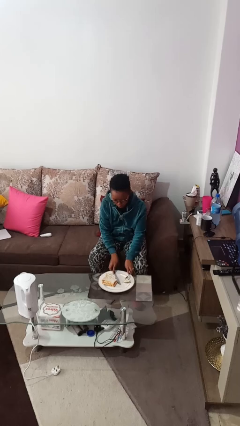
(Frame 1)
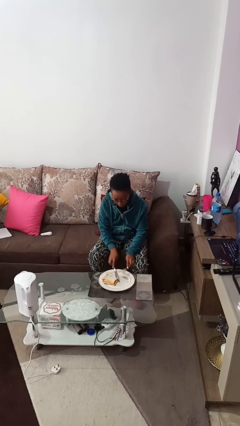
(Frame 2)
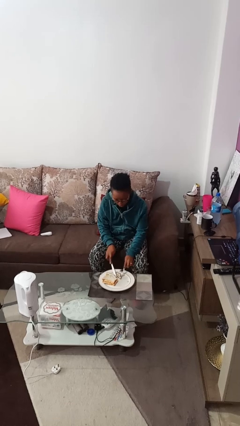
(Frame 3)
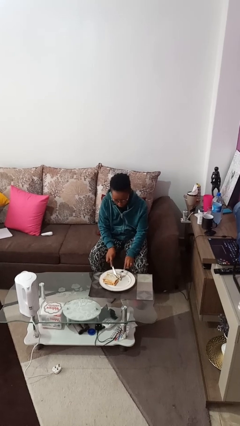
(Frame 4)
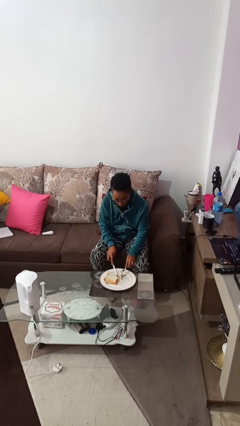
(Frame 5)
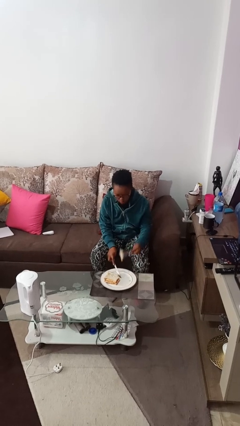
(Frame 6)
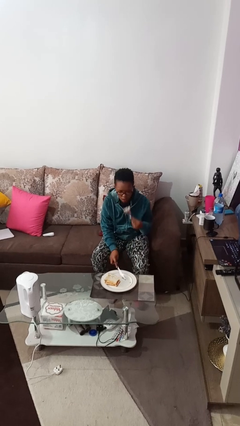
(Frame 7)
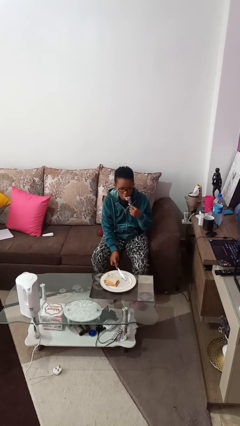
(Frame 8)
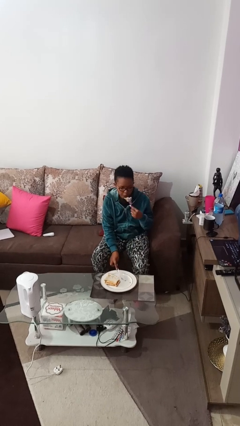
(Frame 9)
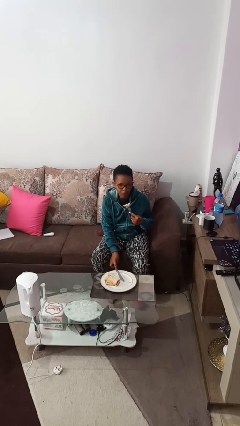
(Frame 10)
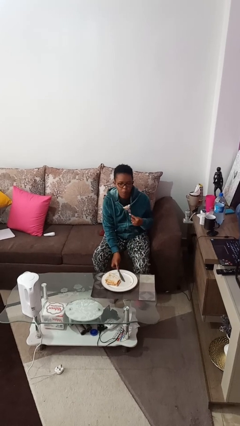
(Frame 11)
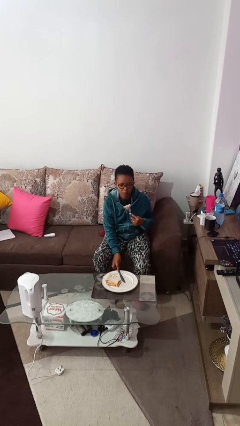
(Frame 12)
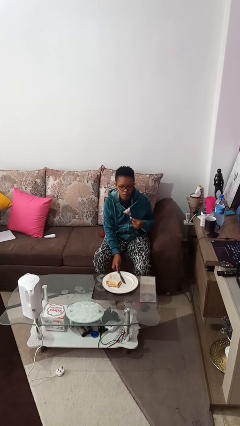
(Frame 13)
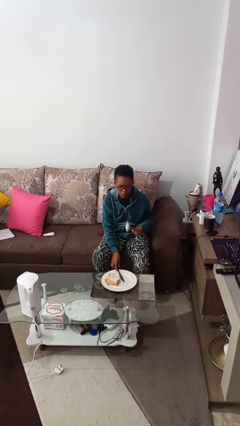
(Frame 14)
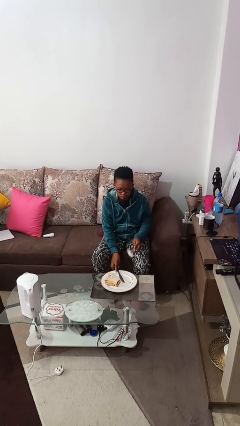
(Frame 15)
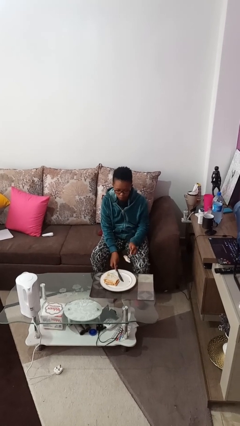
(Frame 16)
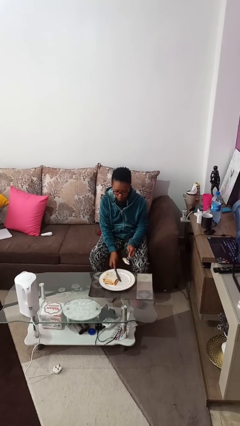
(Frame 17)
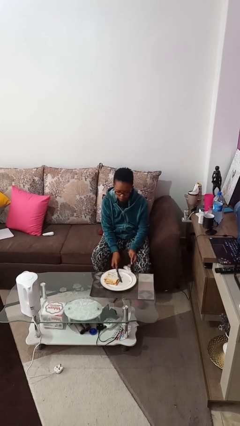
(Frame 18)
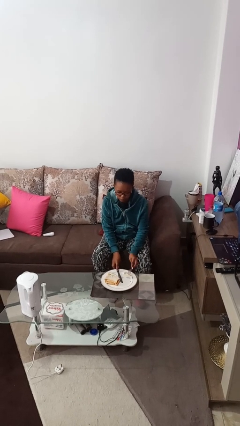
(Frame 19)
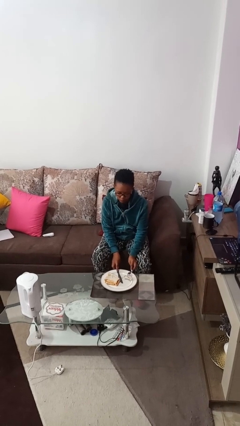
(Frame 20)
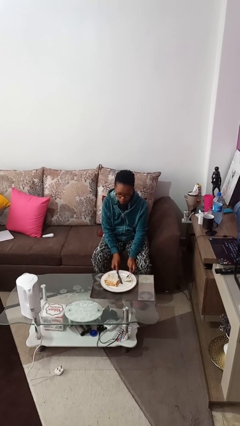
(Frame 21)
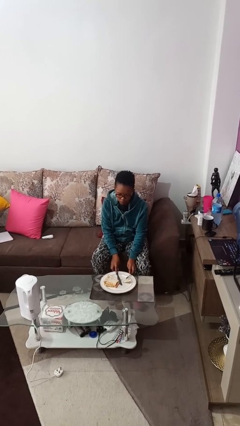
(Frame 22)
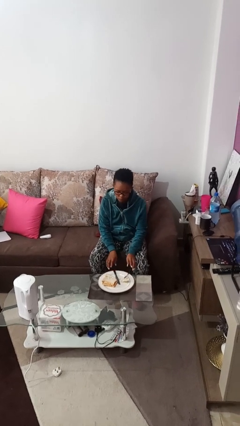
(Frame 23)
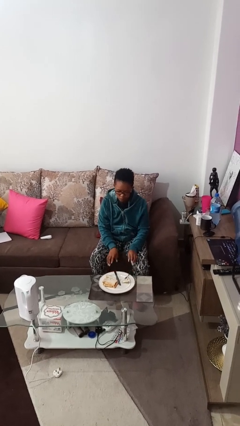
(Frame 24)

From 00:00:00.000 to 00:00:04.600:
person eats with utensil

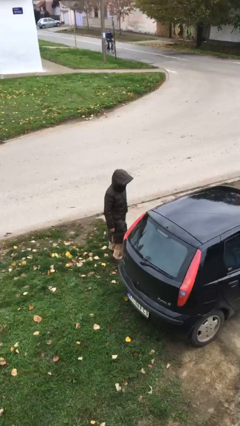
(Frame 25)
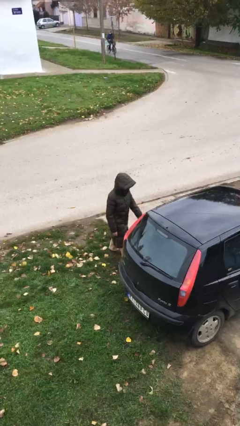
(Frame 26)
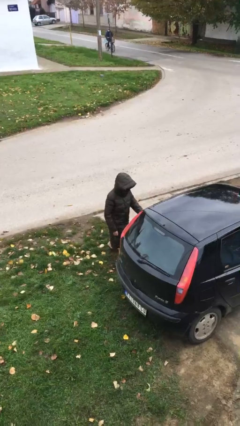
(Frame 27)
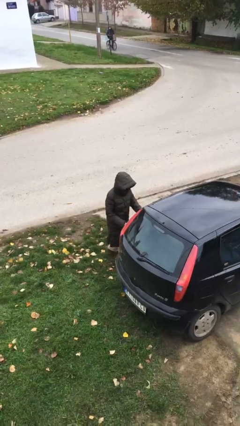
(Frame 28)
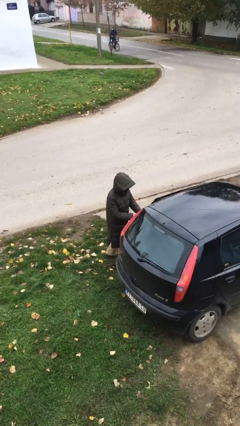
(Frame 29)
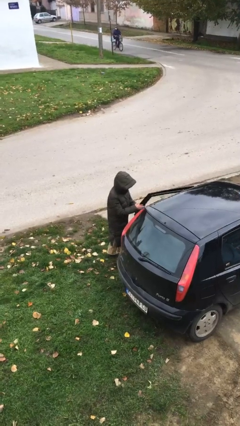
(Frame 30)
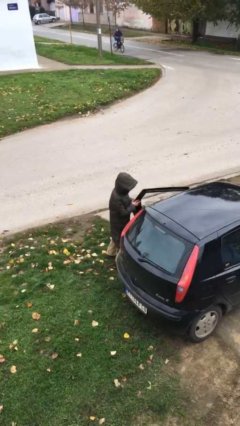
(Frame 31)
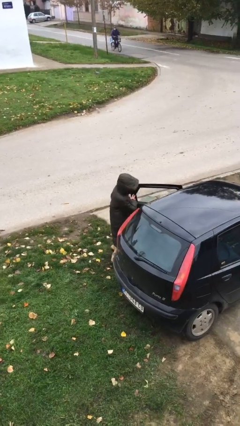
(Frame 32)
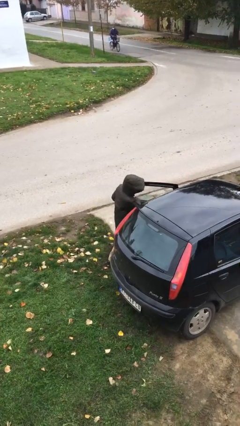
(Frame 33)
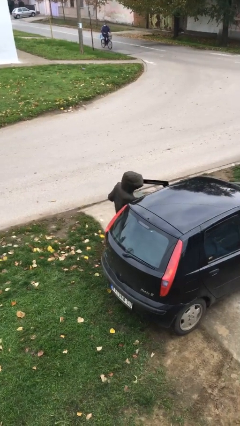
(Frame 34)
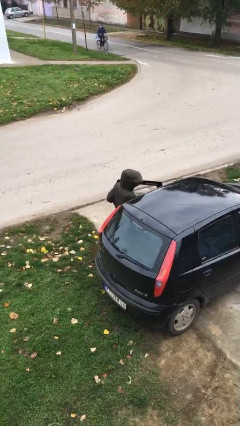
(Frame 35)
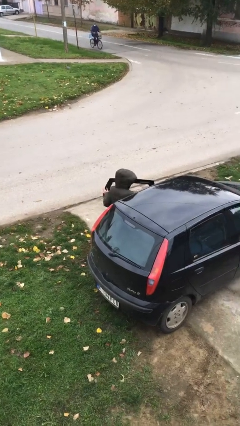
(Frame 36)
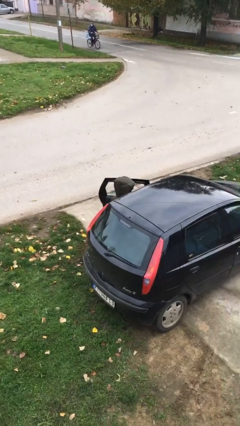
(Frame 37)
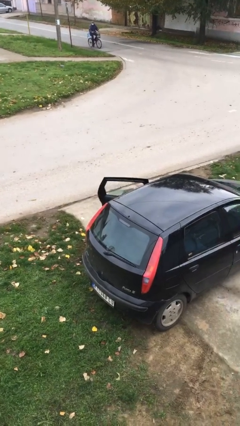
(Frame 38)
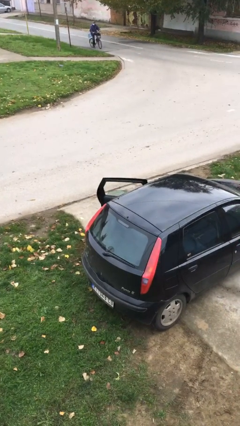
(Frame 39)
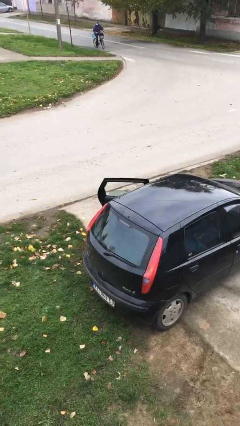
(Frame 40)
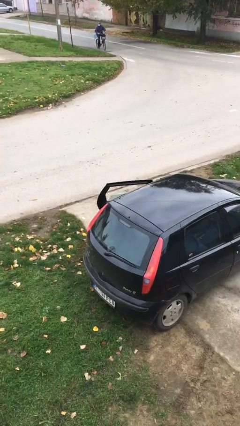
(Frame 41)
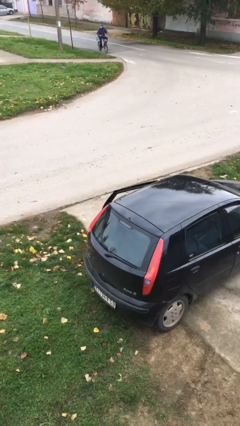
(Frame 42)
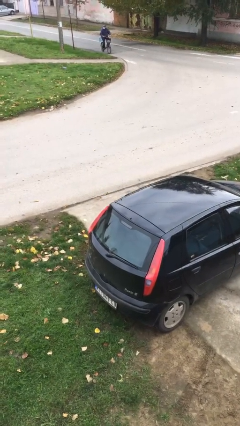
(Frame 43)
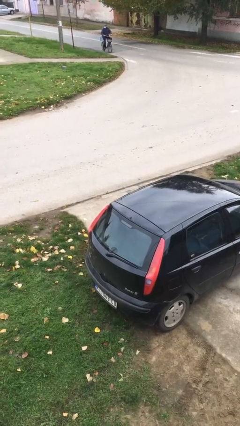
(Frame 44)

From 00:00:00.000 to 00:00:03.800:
person enters car

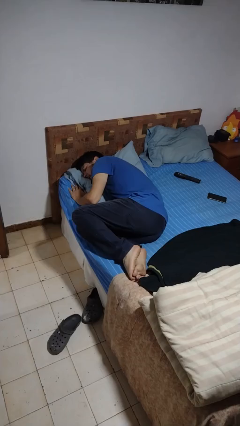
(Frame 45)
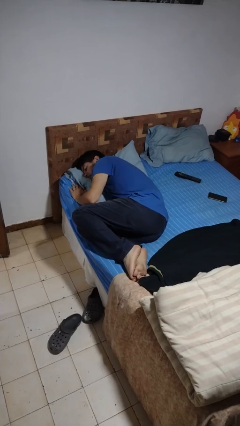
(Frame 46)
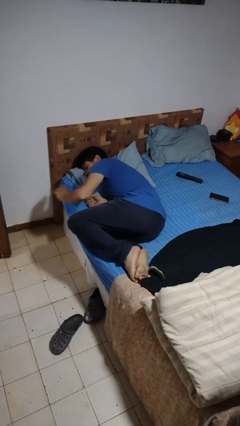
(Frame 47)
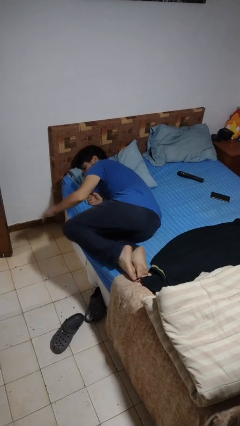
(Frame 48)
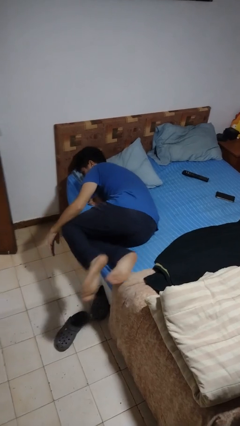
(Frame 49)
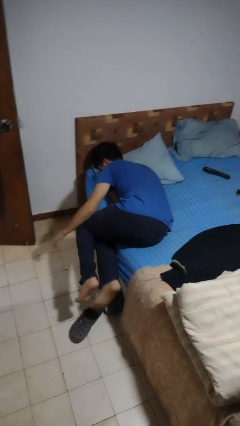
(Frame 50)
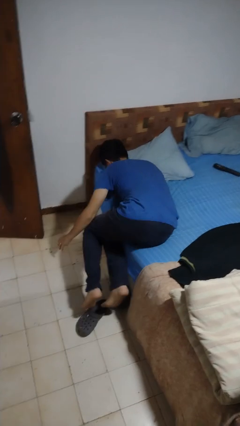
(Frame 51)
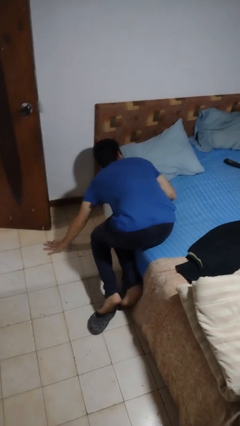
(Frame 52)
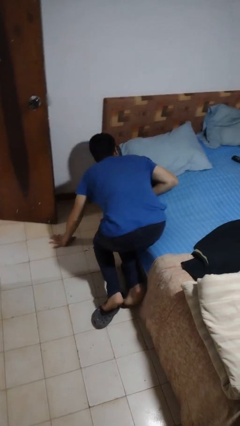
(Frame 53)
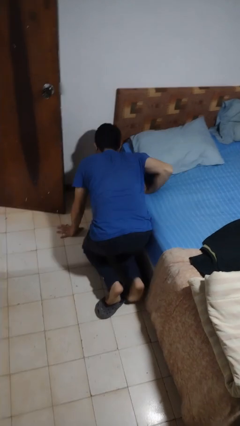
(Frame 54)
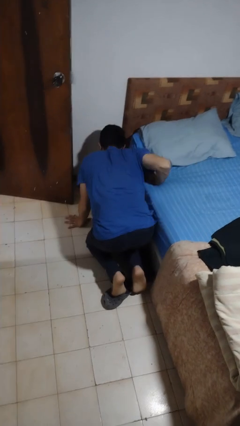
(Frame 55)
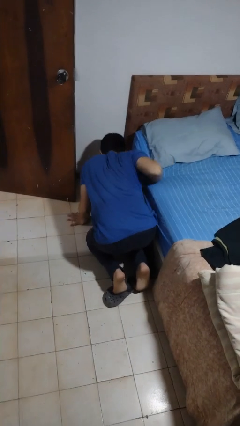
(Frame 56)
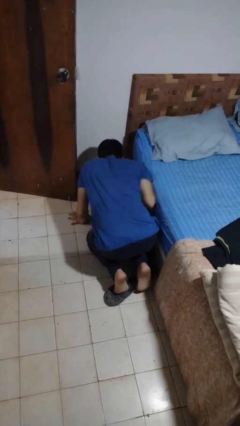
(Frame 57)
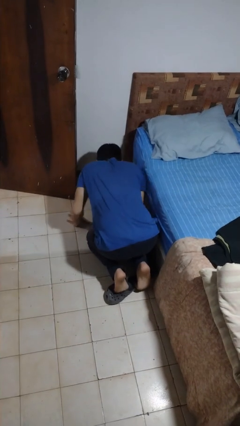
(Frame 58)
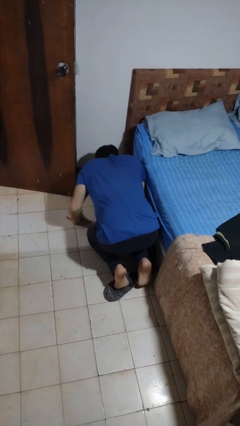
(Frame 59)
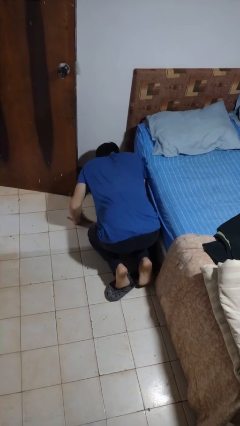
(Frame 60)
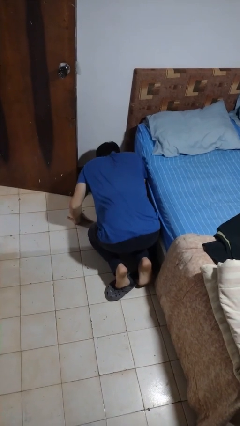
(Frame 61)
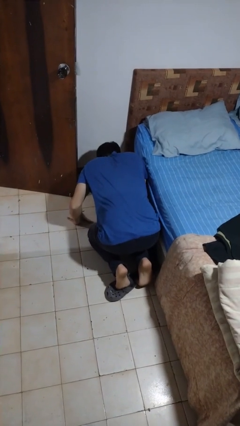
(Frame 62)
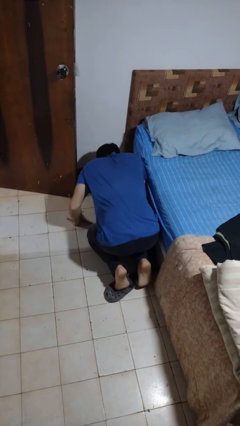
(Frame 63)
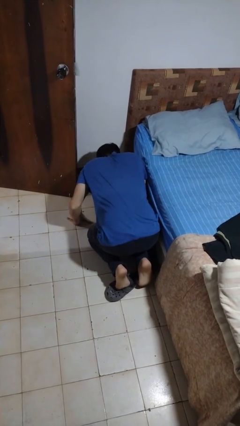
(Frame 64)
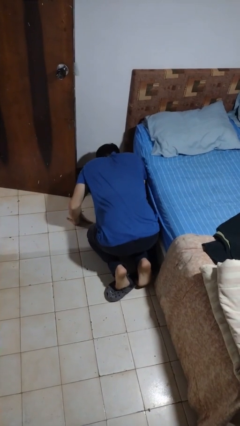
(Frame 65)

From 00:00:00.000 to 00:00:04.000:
person falls from bed

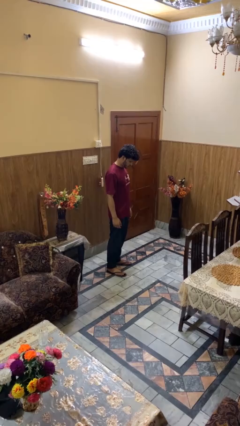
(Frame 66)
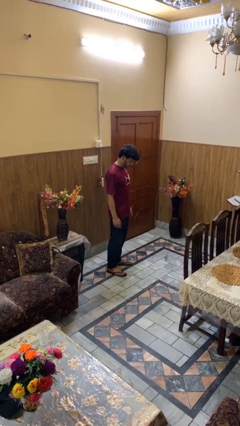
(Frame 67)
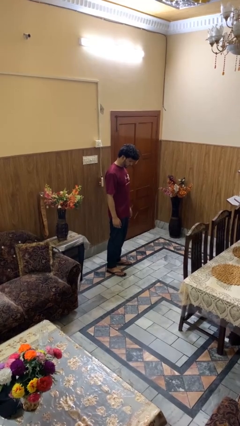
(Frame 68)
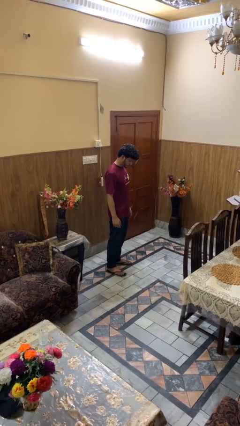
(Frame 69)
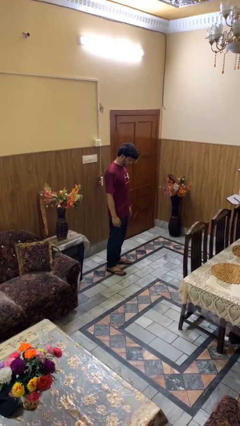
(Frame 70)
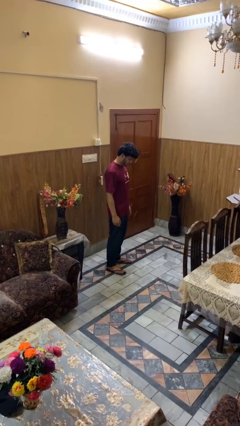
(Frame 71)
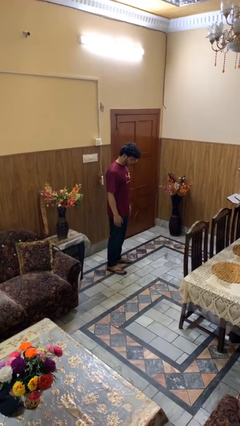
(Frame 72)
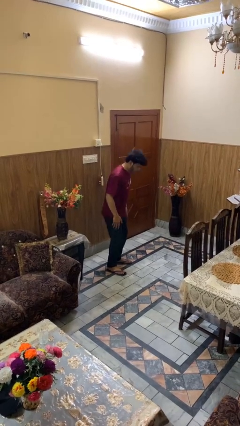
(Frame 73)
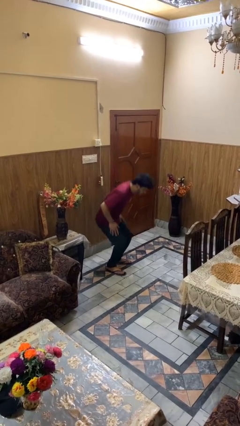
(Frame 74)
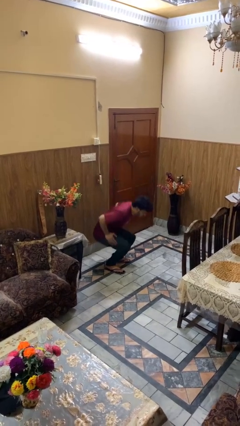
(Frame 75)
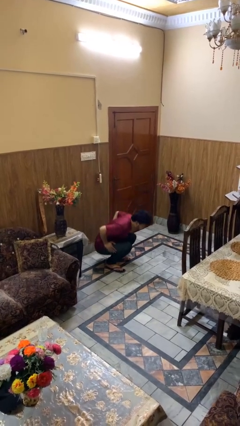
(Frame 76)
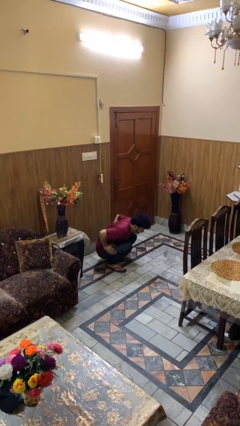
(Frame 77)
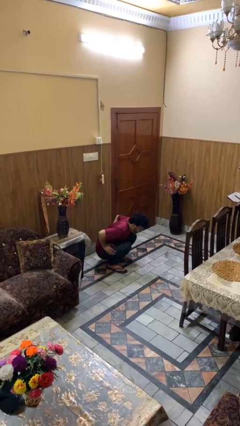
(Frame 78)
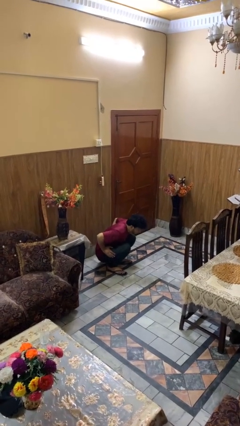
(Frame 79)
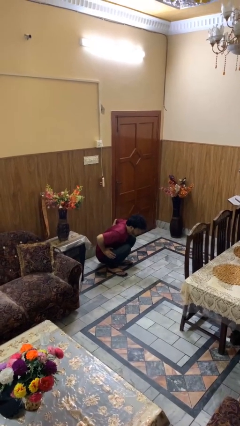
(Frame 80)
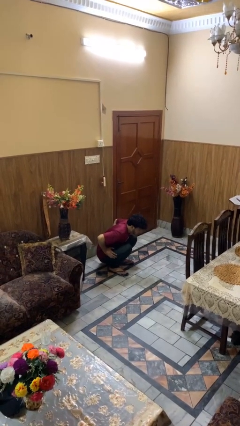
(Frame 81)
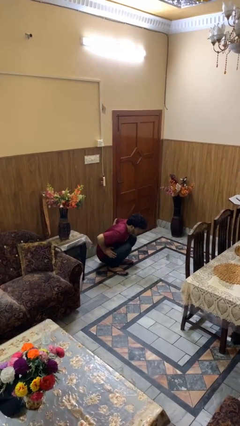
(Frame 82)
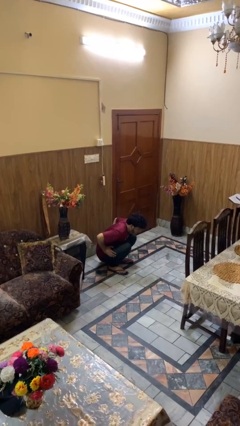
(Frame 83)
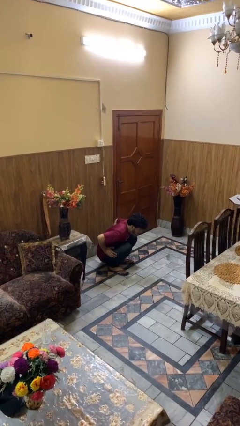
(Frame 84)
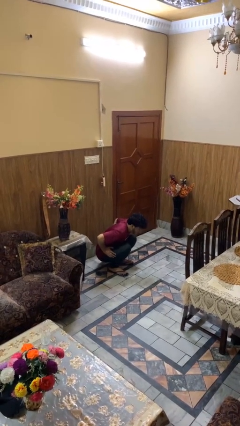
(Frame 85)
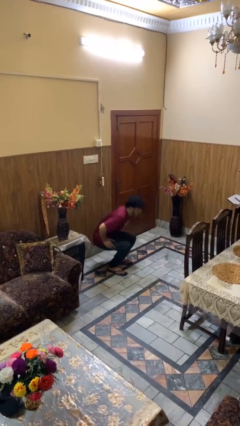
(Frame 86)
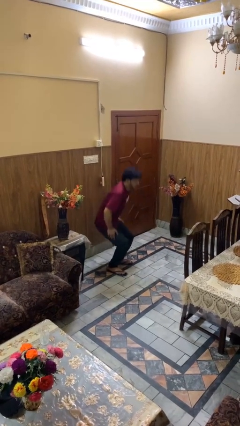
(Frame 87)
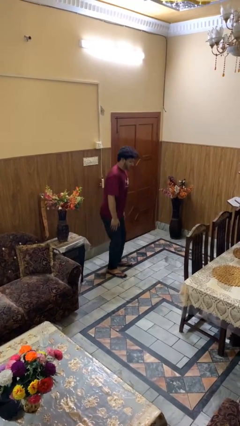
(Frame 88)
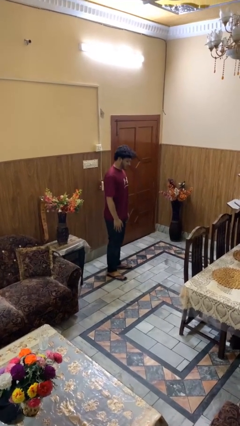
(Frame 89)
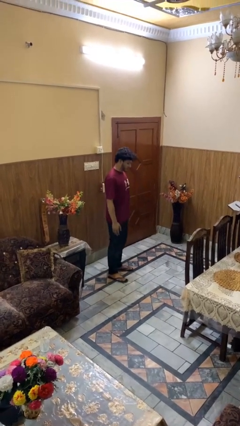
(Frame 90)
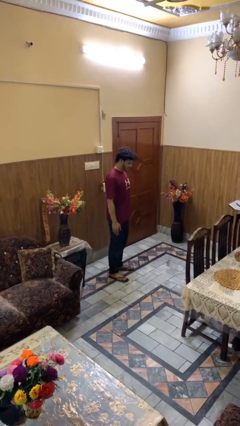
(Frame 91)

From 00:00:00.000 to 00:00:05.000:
person exercises with situp

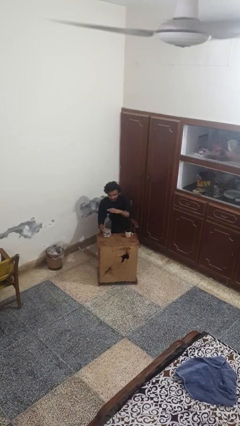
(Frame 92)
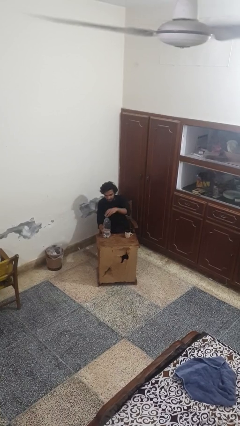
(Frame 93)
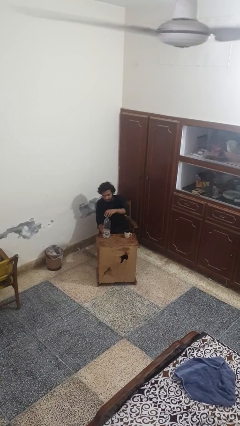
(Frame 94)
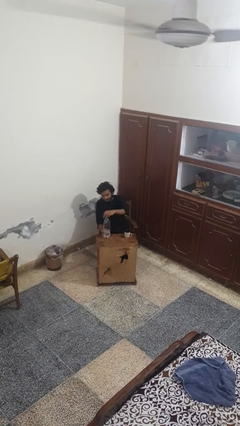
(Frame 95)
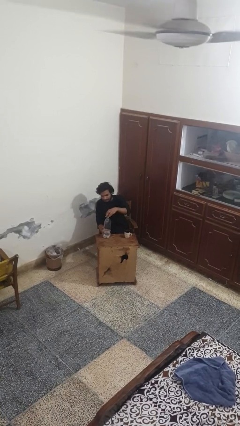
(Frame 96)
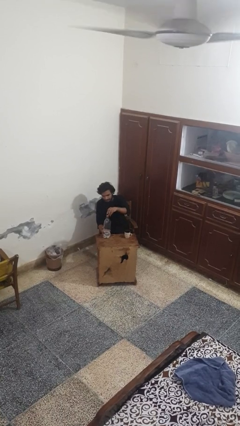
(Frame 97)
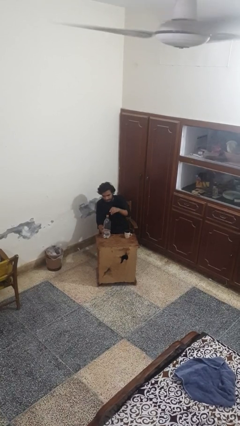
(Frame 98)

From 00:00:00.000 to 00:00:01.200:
person unscrews lid from bottle
